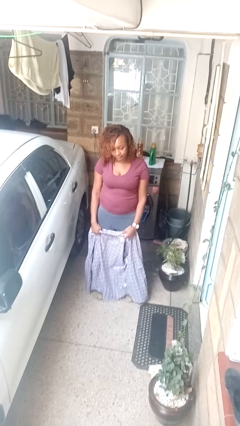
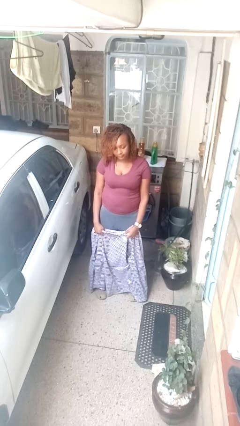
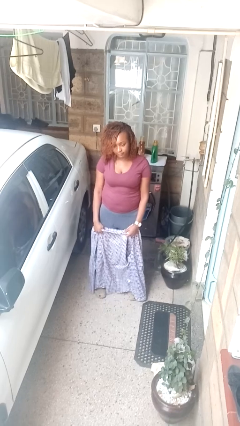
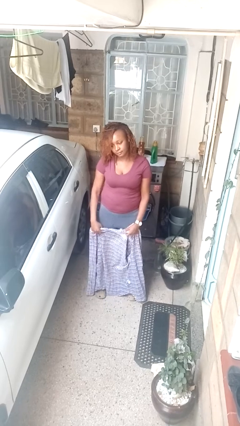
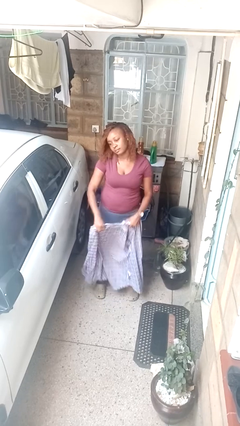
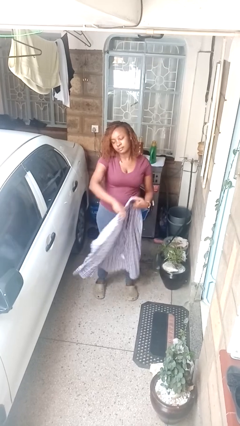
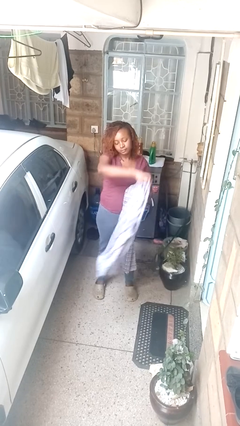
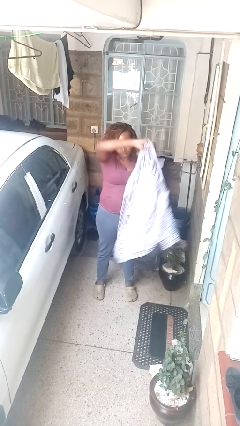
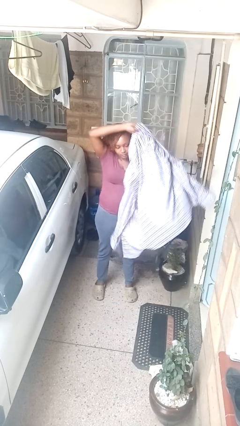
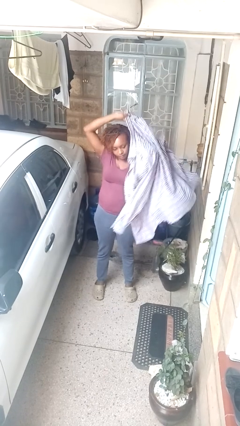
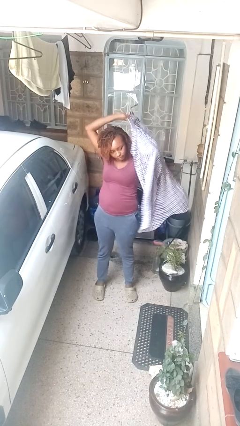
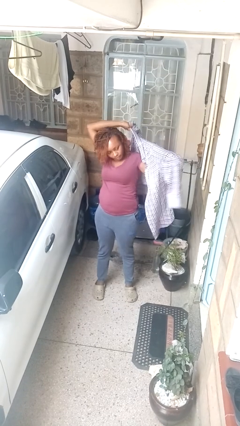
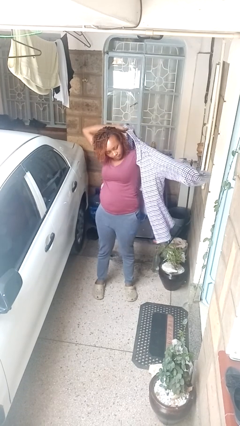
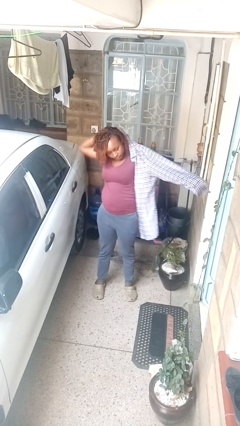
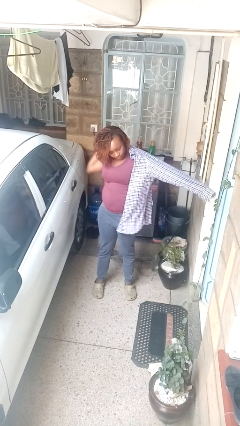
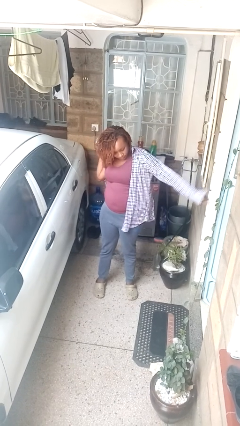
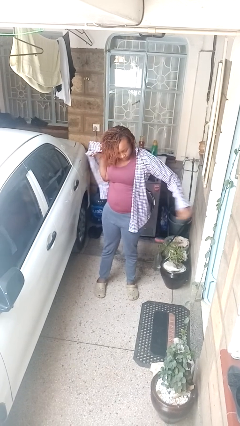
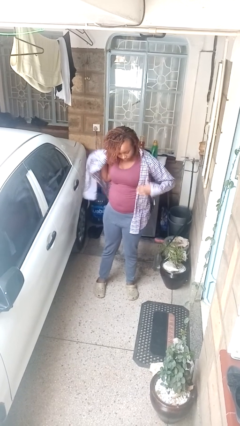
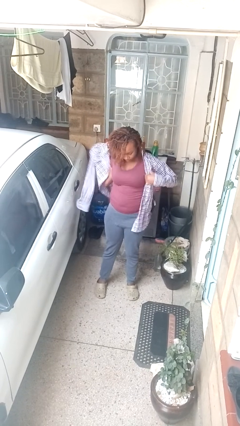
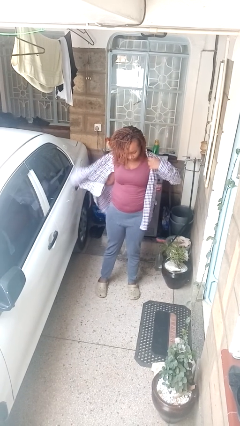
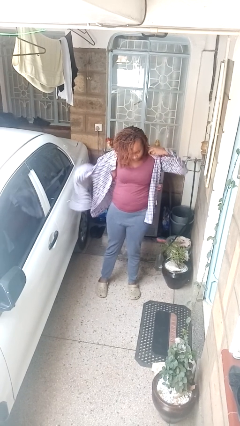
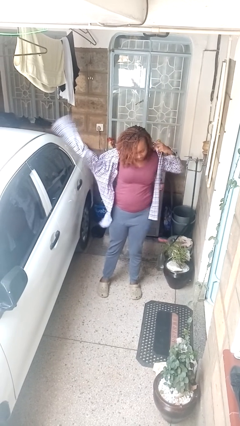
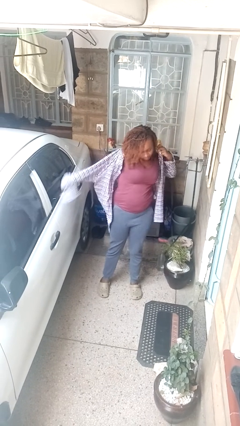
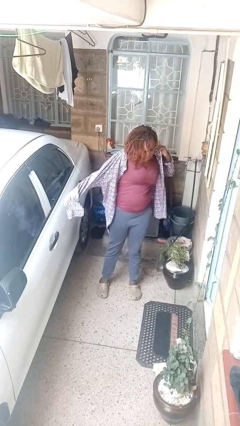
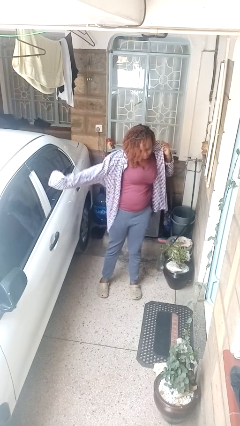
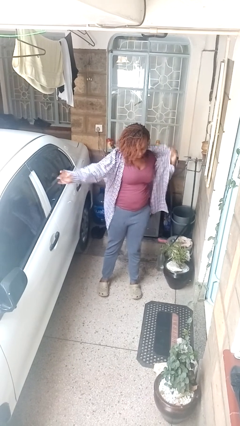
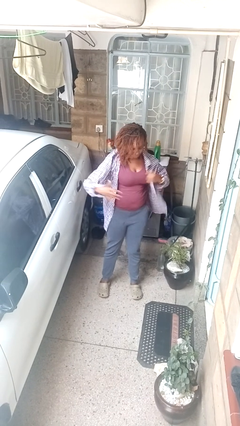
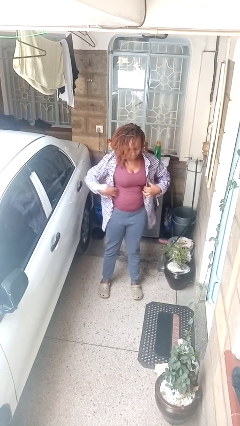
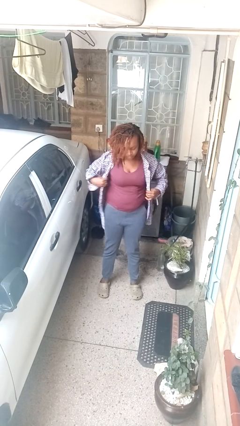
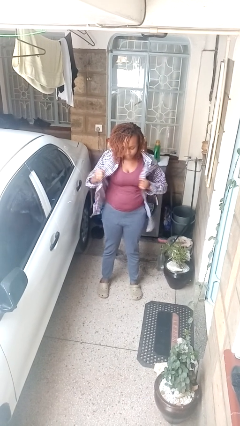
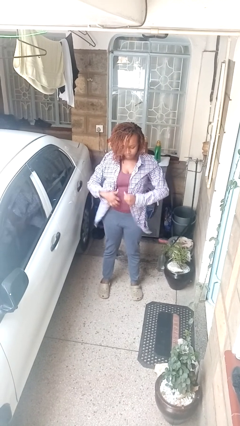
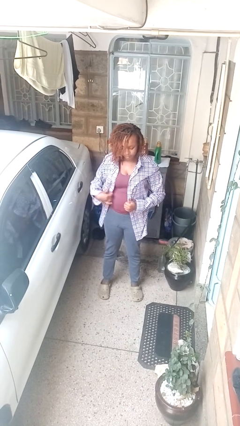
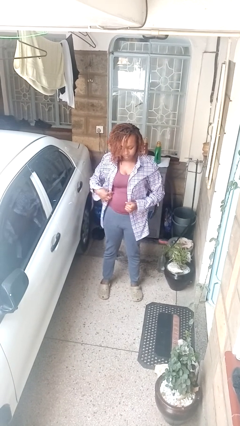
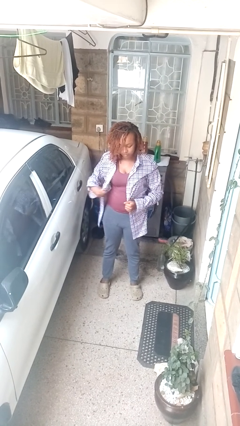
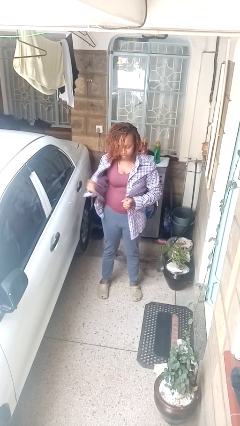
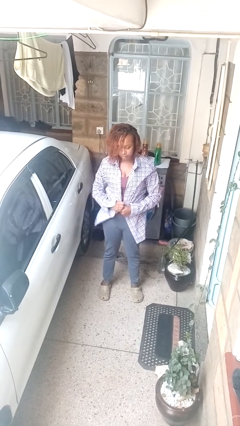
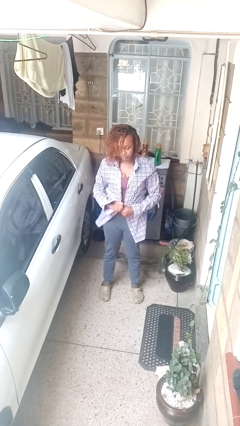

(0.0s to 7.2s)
person puts on shirt

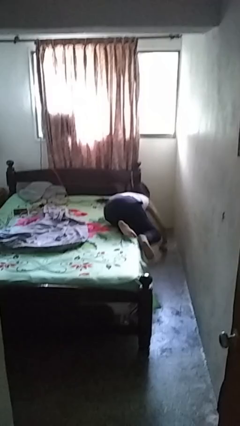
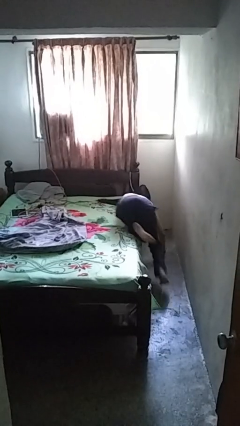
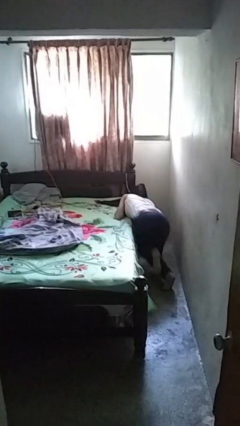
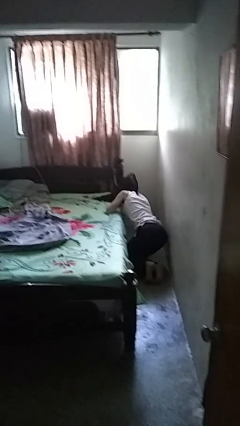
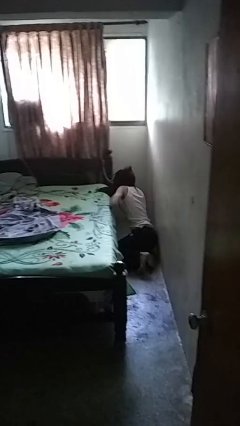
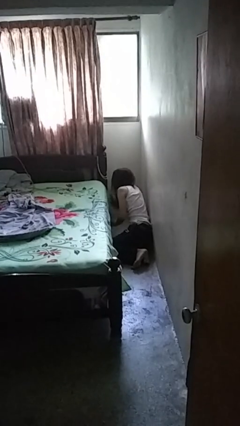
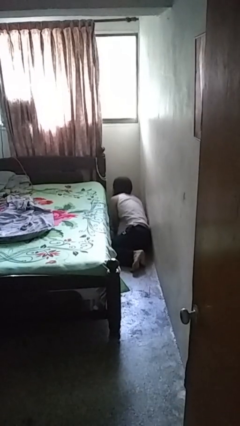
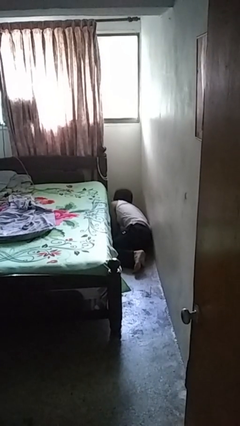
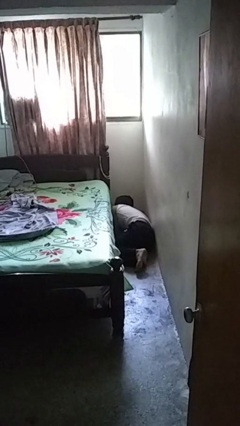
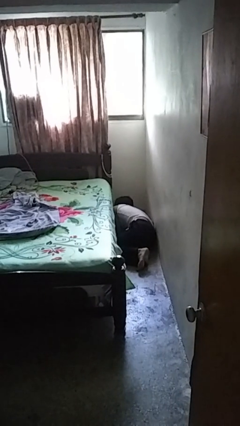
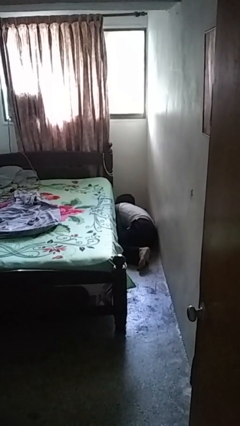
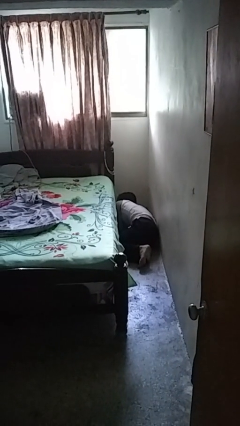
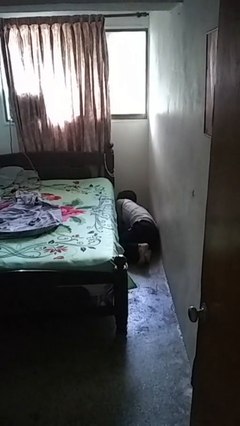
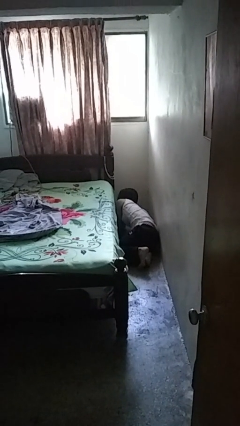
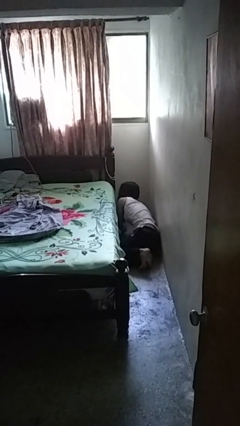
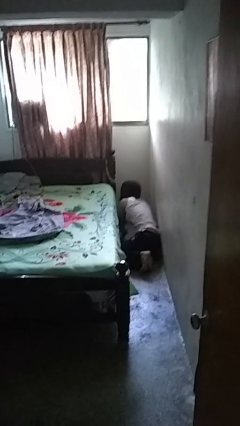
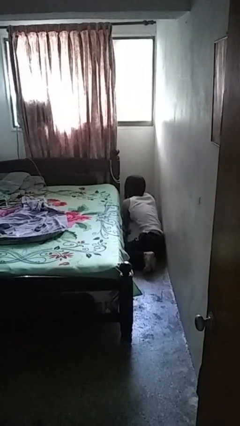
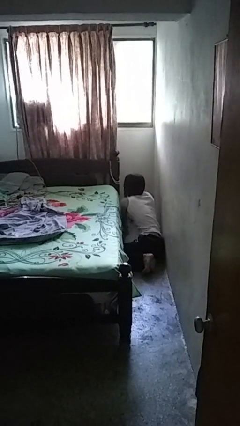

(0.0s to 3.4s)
person falls from bed

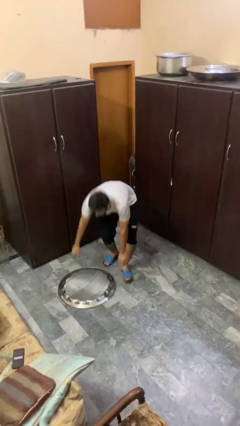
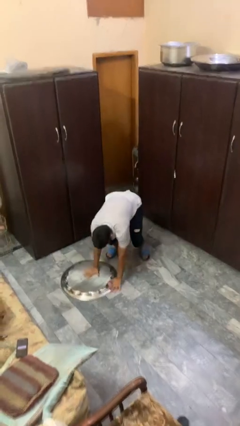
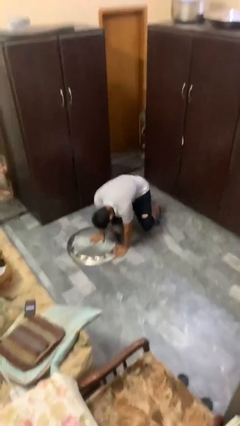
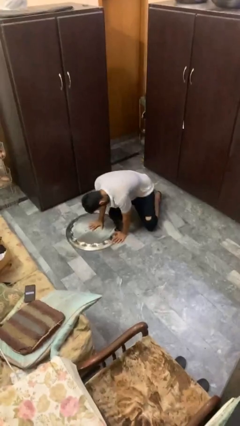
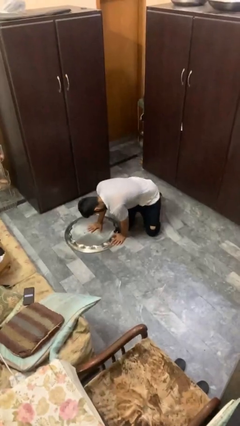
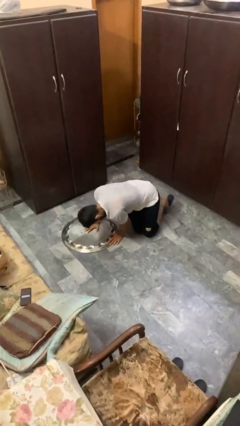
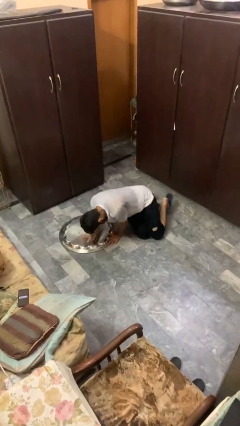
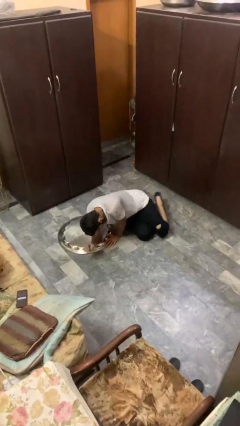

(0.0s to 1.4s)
person trips on object on floor

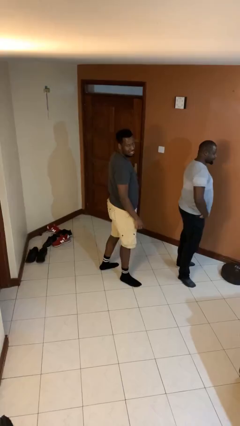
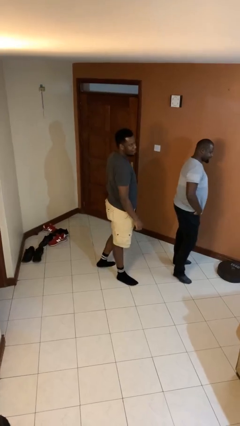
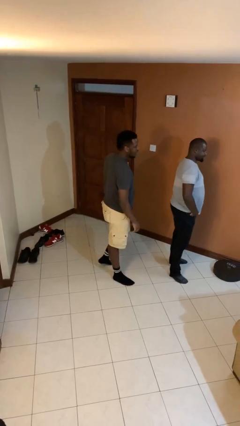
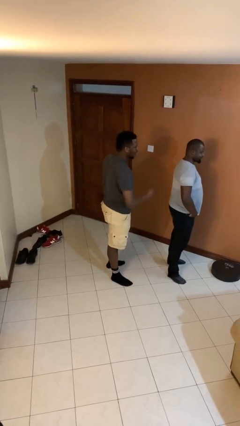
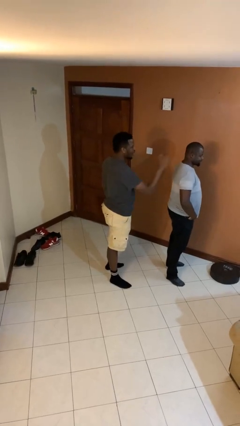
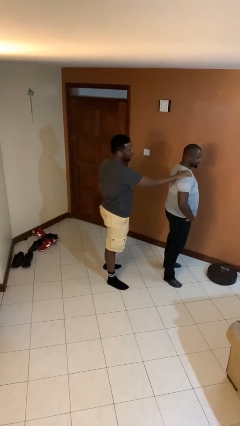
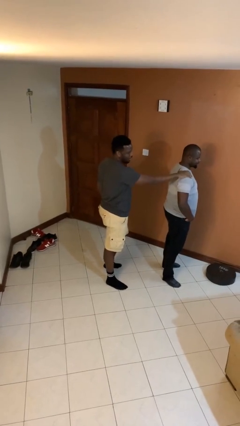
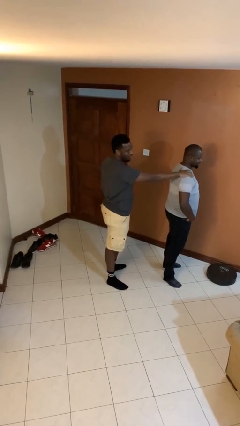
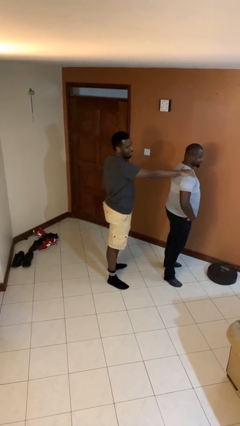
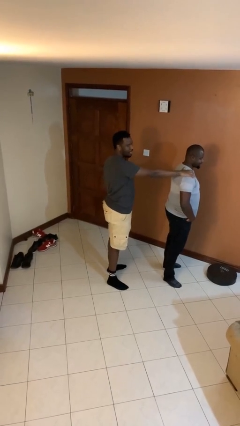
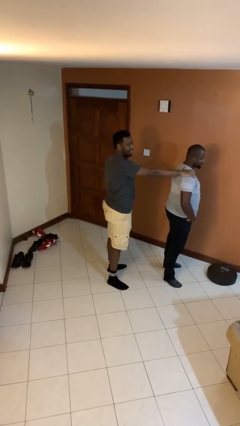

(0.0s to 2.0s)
person grabs person by shoulder

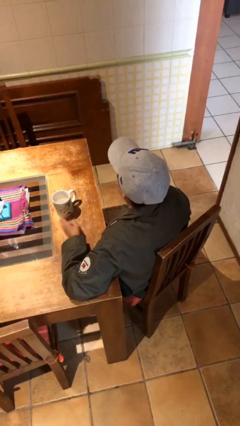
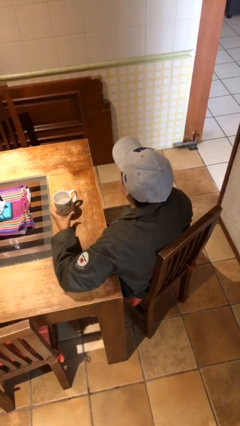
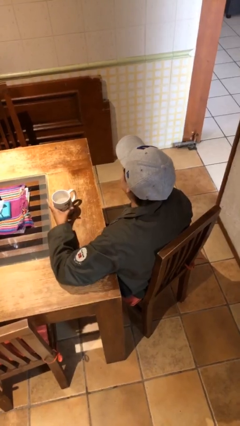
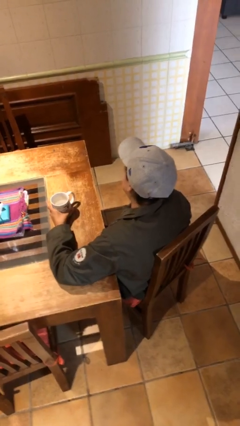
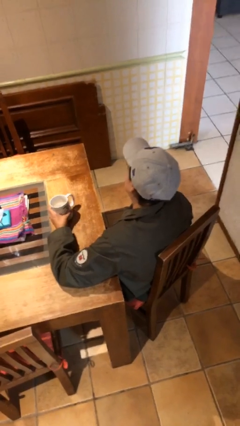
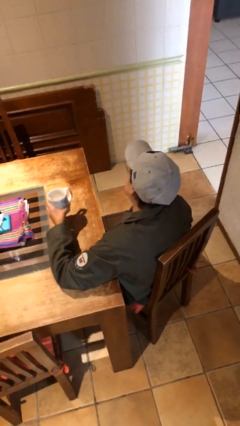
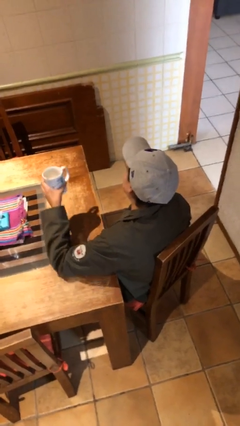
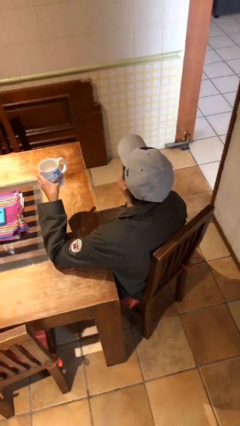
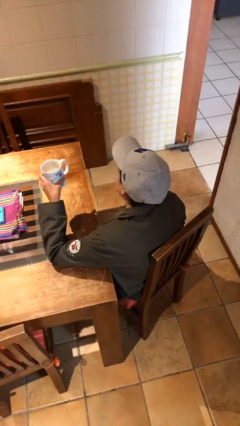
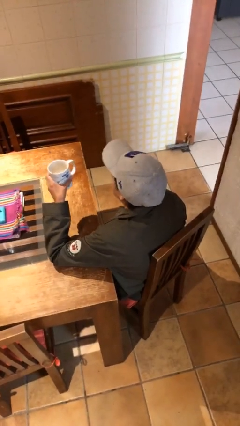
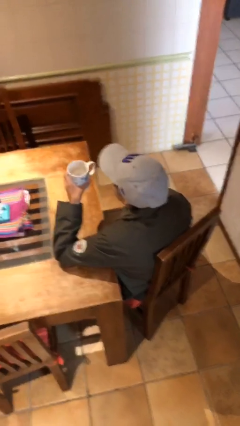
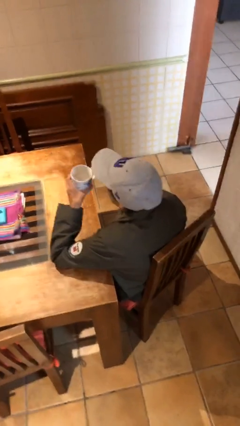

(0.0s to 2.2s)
person picks up object from table

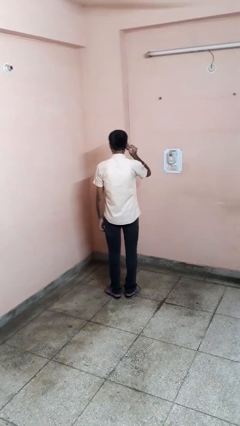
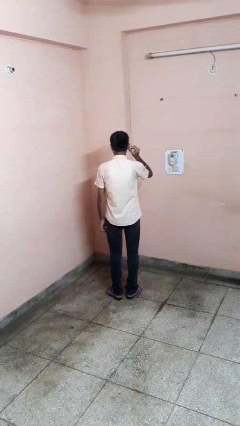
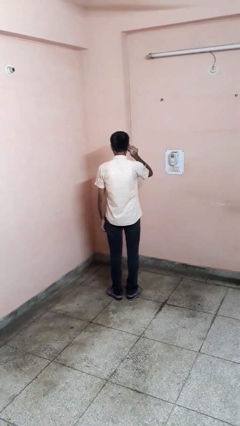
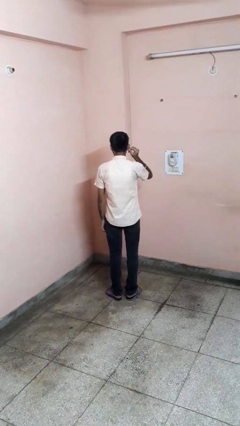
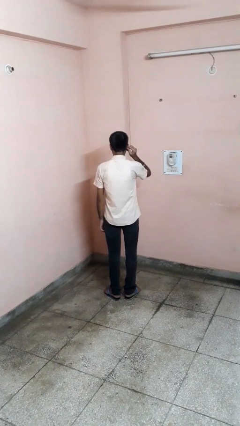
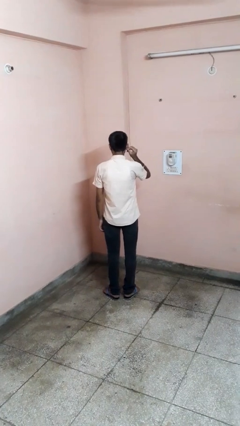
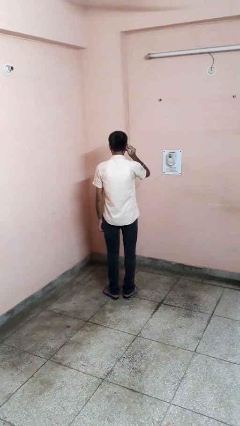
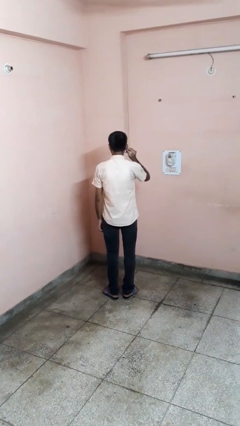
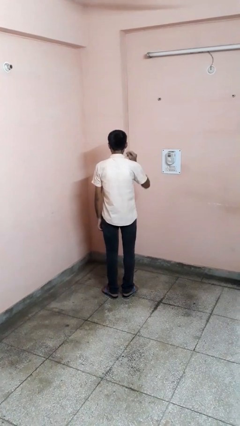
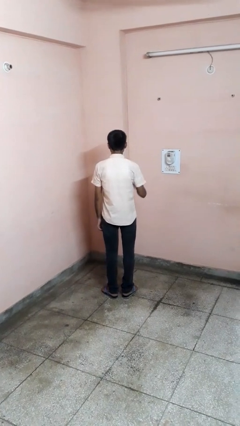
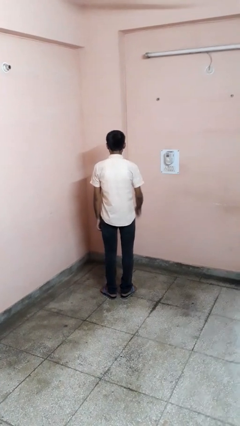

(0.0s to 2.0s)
person touches earlobe
